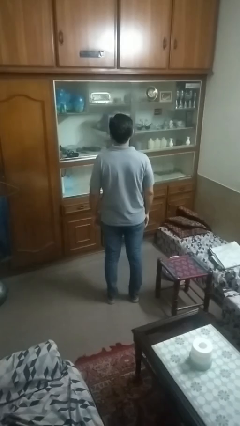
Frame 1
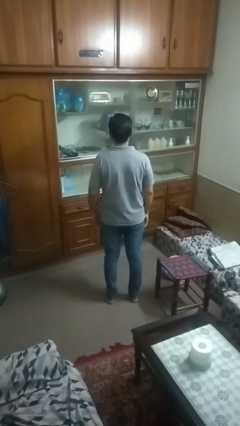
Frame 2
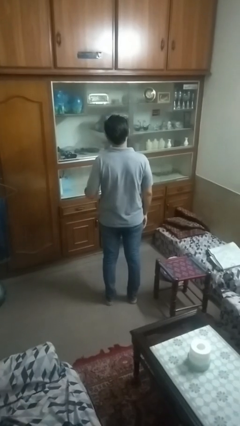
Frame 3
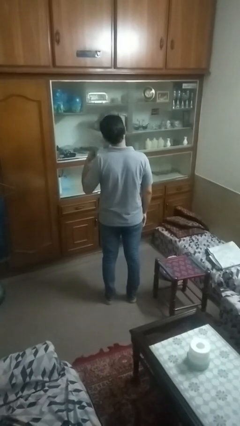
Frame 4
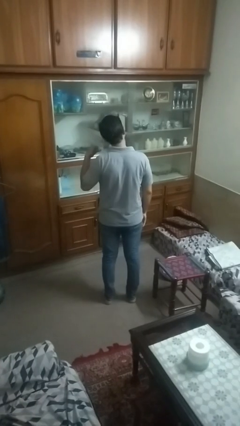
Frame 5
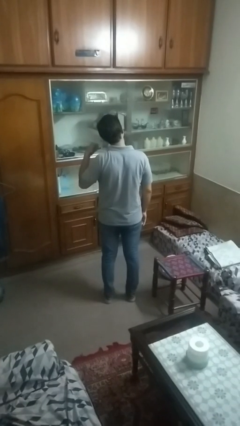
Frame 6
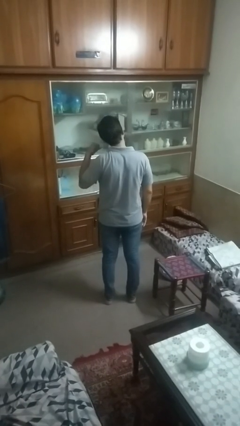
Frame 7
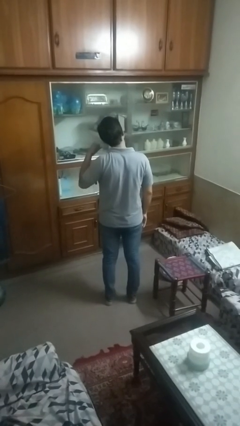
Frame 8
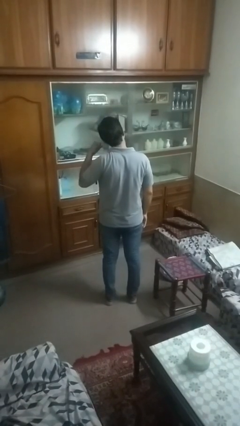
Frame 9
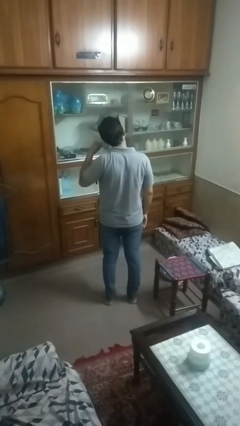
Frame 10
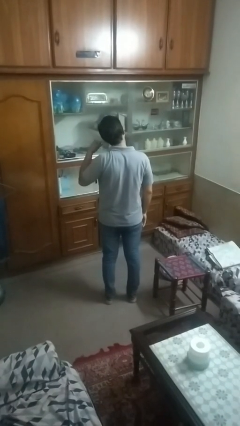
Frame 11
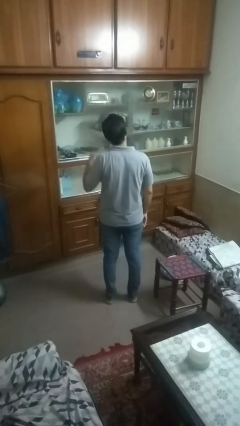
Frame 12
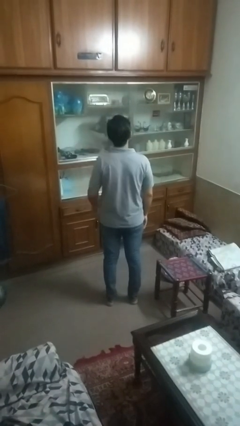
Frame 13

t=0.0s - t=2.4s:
person gestures call me

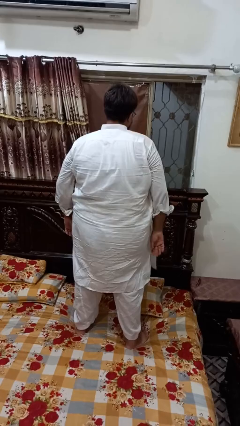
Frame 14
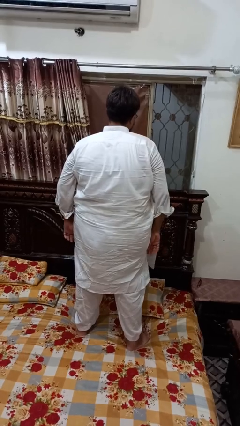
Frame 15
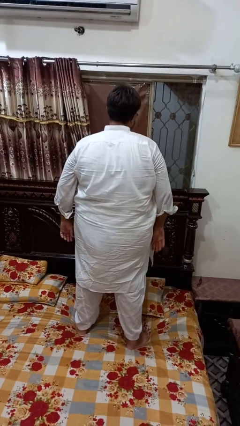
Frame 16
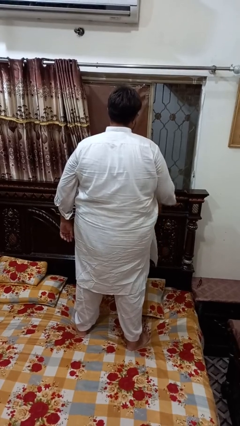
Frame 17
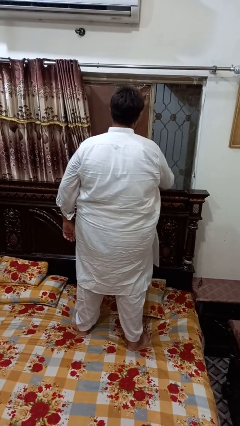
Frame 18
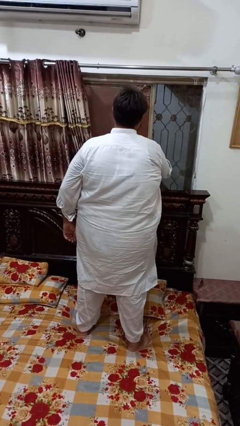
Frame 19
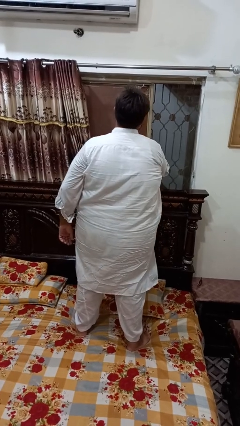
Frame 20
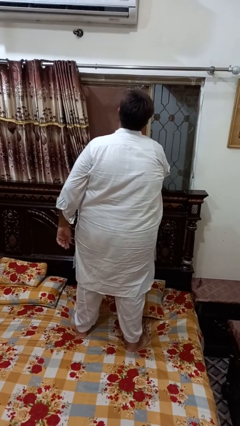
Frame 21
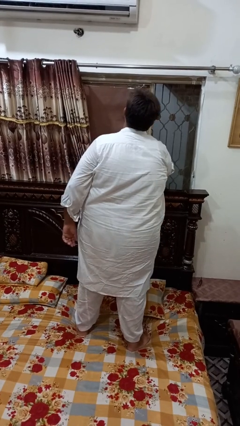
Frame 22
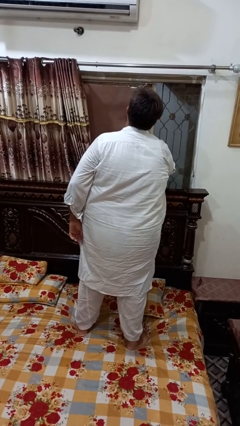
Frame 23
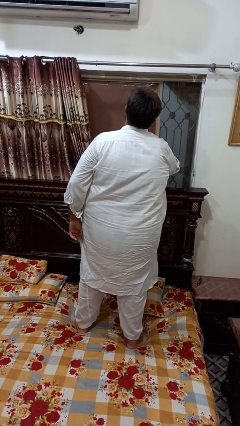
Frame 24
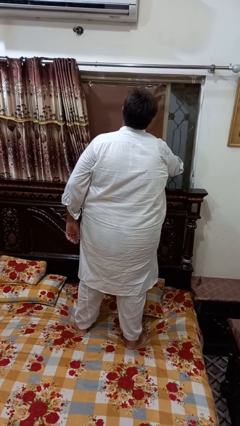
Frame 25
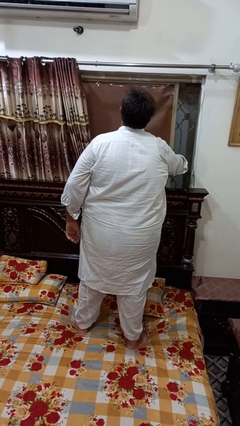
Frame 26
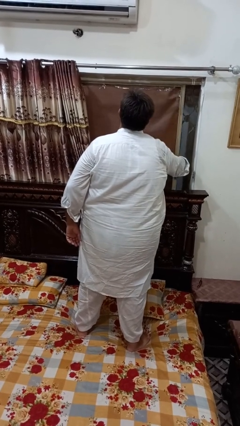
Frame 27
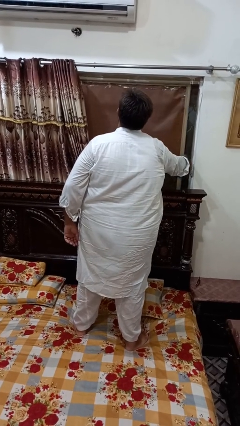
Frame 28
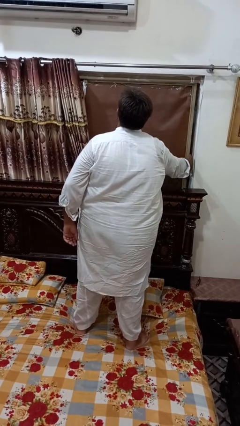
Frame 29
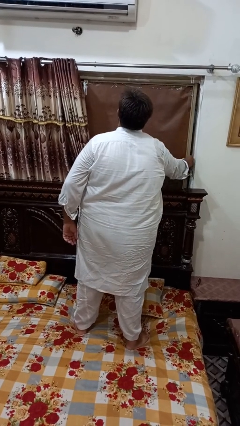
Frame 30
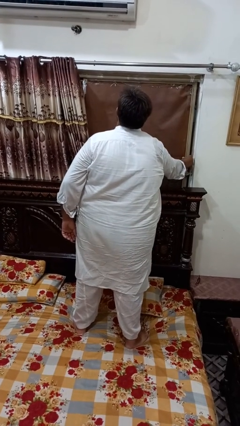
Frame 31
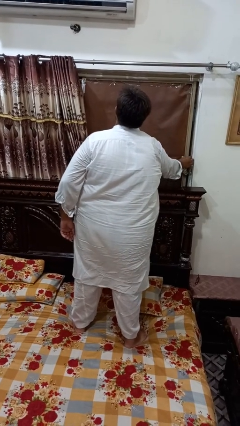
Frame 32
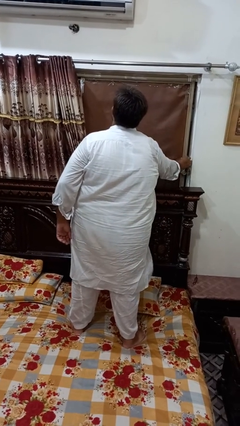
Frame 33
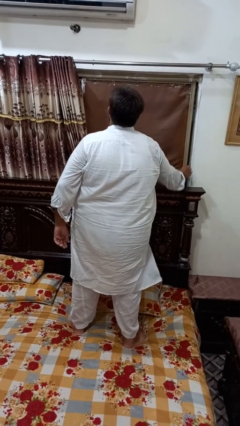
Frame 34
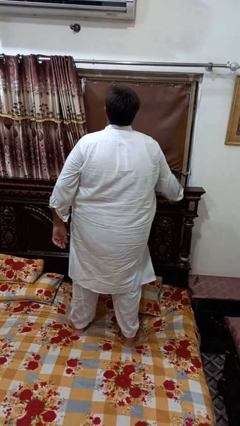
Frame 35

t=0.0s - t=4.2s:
person closes home window

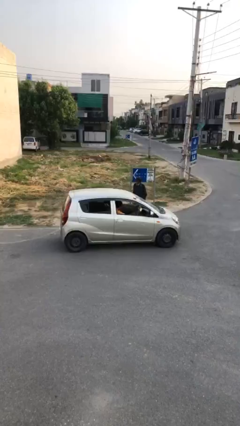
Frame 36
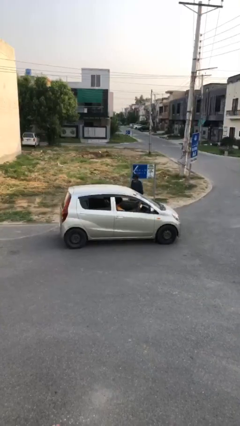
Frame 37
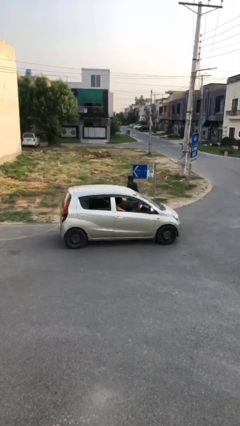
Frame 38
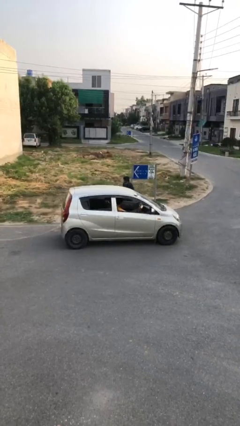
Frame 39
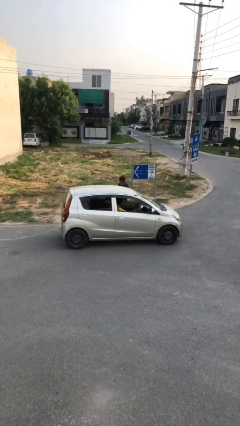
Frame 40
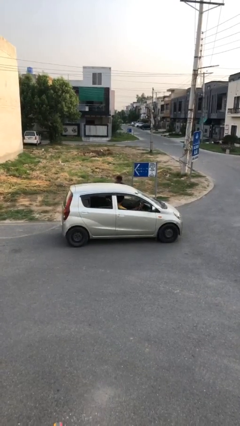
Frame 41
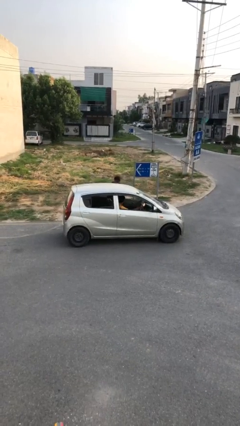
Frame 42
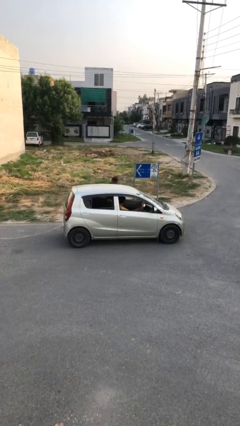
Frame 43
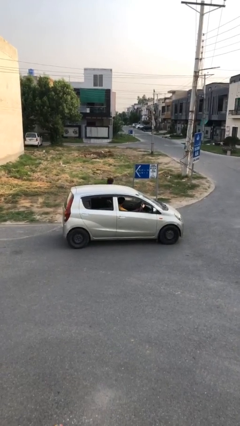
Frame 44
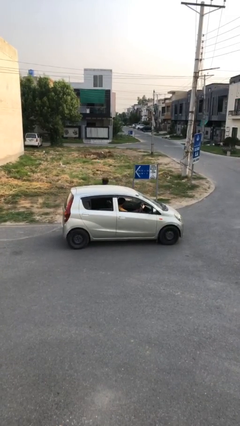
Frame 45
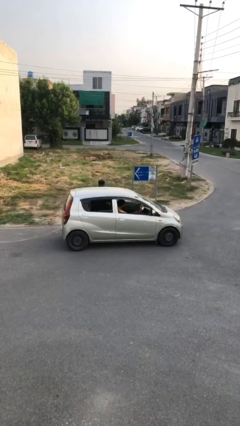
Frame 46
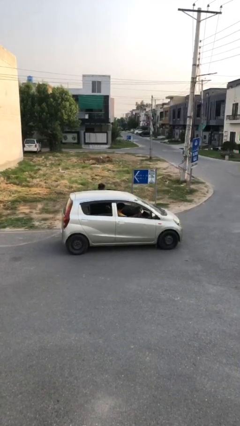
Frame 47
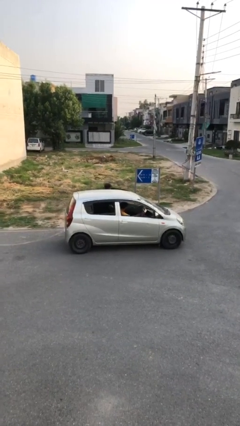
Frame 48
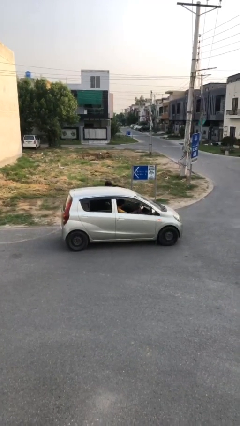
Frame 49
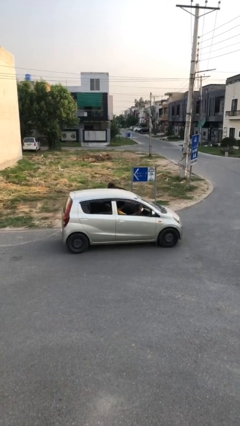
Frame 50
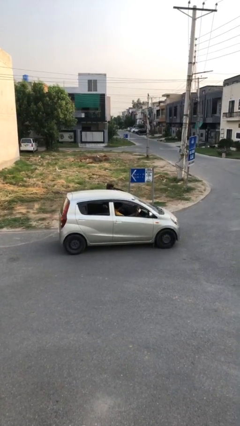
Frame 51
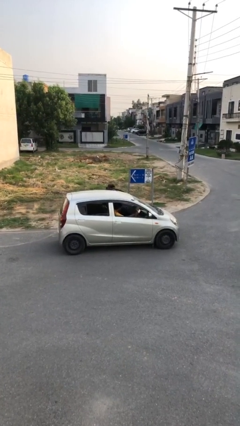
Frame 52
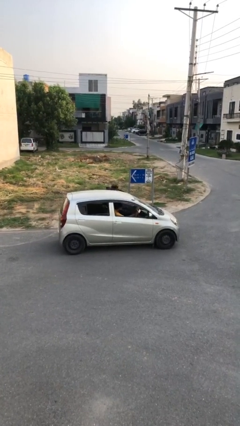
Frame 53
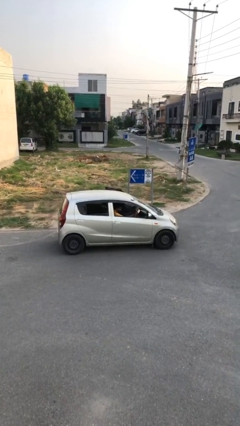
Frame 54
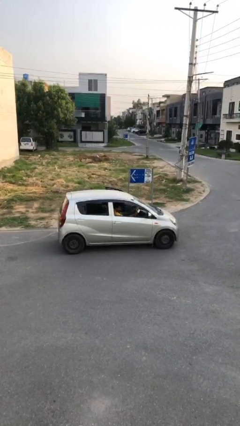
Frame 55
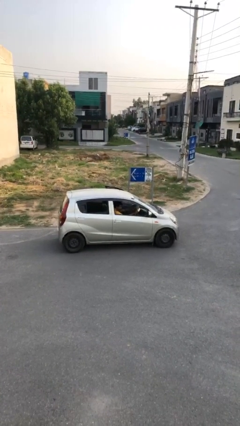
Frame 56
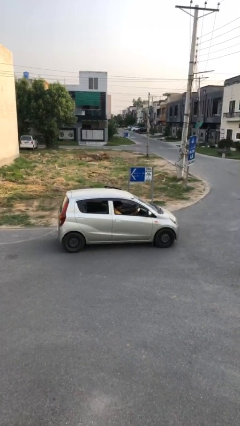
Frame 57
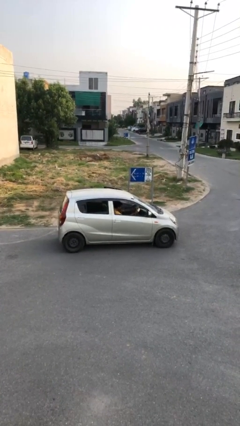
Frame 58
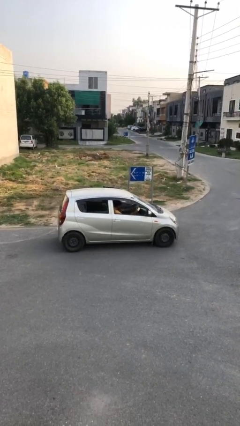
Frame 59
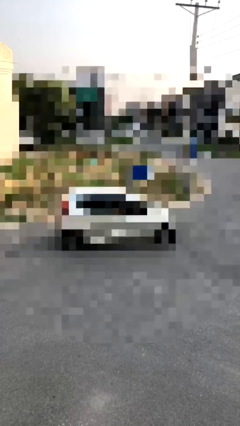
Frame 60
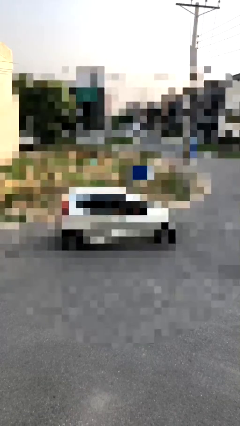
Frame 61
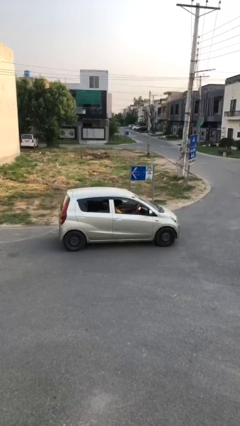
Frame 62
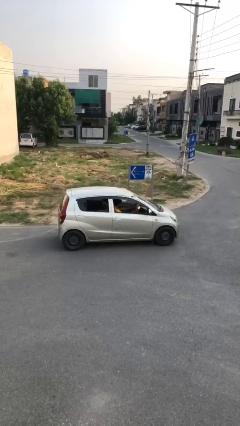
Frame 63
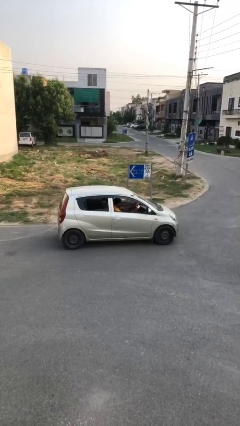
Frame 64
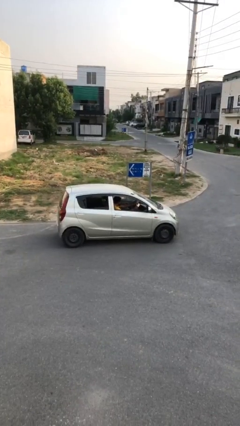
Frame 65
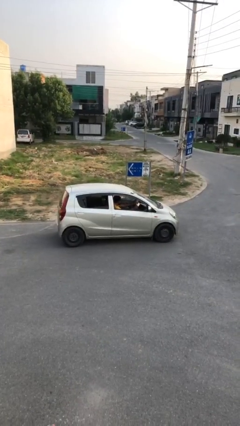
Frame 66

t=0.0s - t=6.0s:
car picks up person

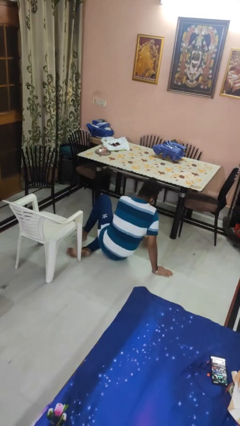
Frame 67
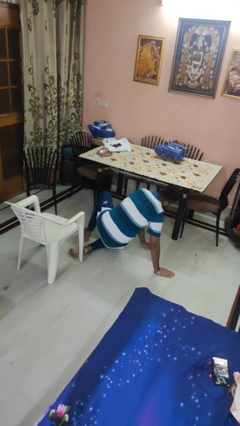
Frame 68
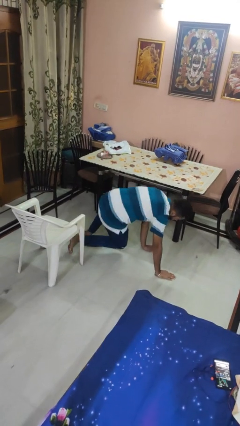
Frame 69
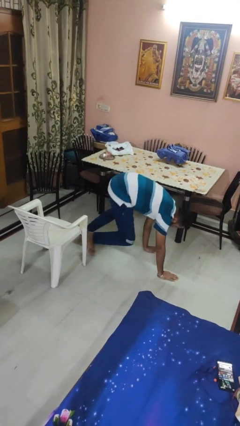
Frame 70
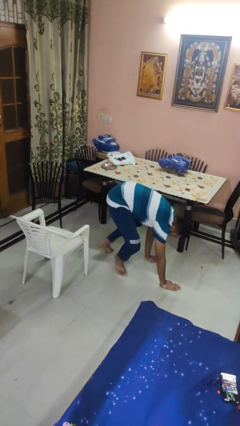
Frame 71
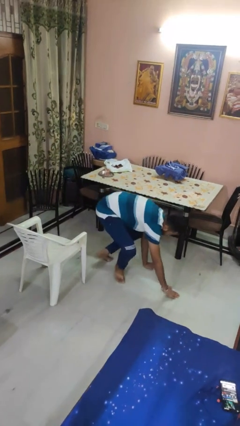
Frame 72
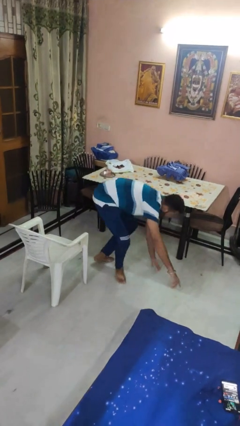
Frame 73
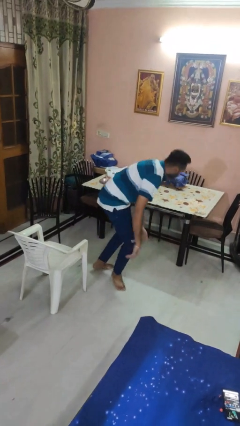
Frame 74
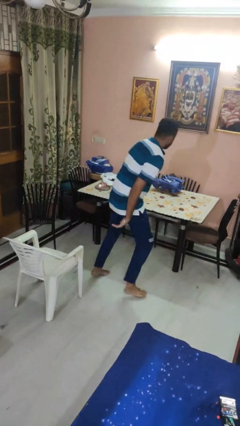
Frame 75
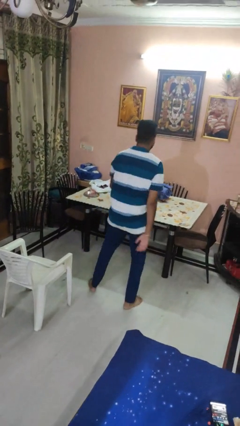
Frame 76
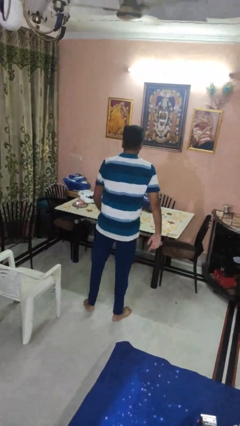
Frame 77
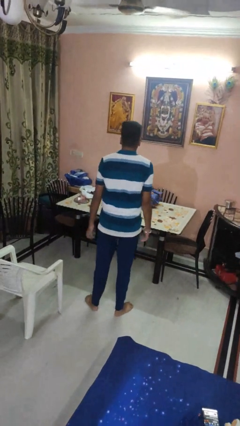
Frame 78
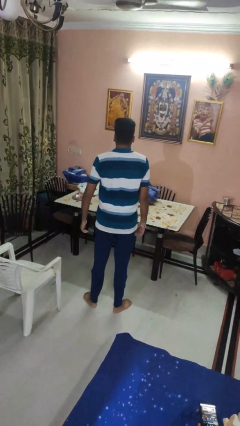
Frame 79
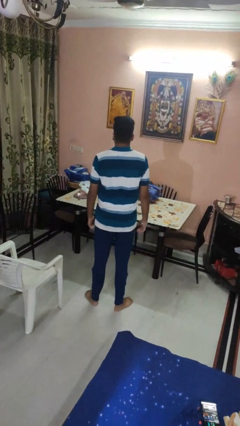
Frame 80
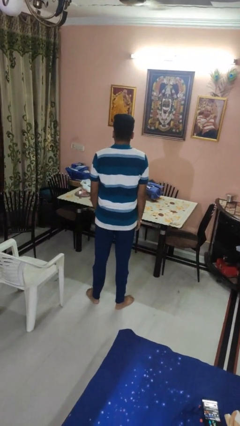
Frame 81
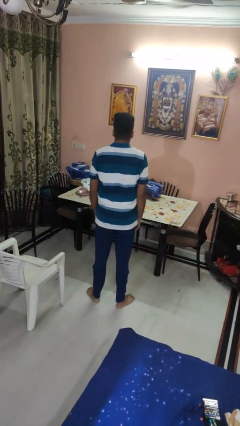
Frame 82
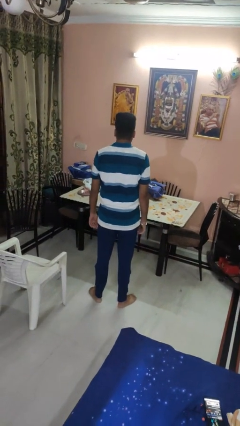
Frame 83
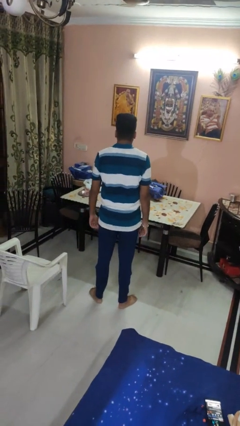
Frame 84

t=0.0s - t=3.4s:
person stands up from floor

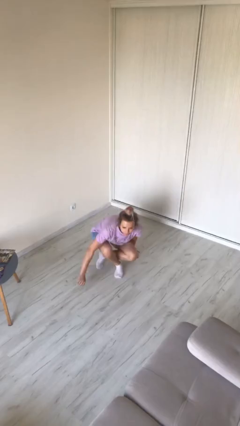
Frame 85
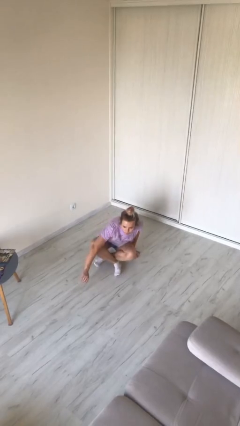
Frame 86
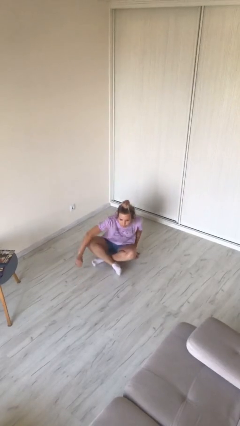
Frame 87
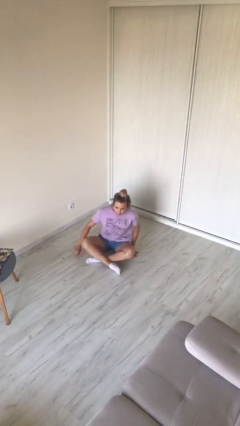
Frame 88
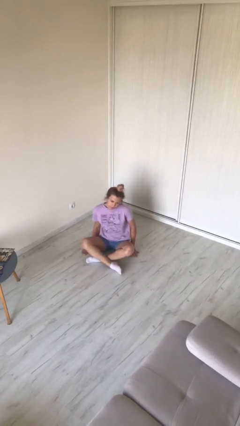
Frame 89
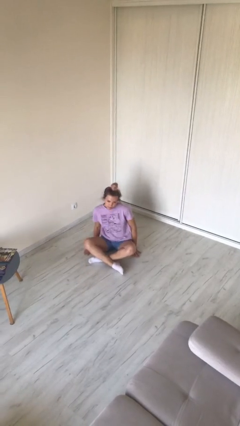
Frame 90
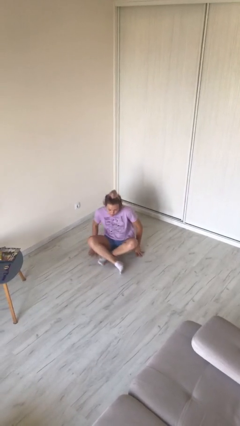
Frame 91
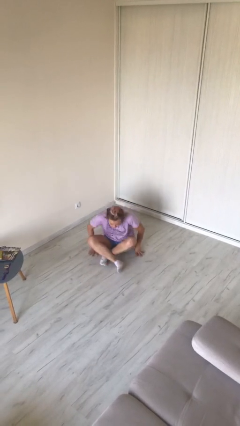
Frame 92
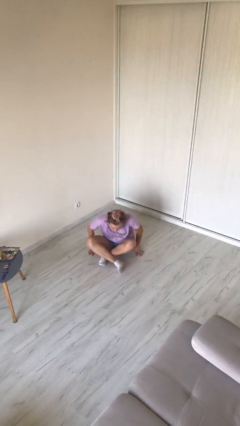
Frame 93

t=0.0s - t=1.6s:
person sits crisscross
